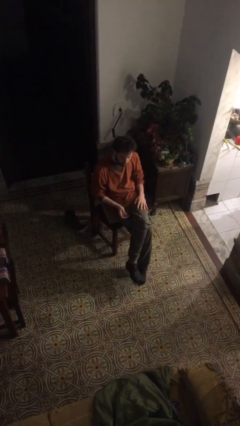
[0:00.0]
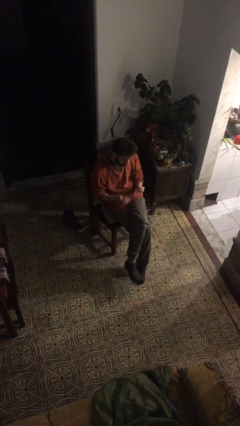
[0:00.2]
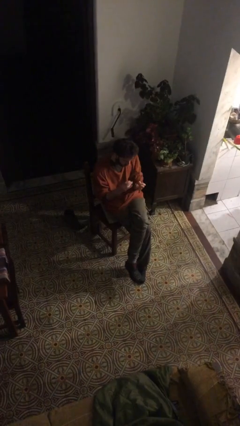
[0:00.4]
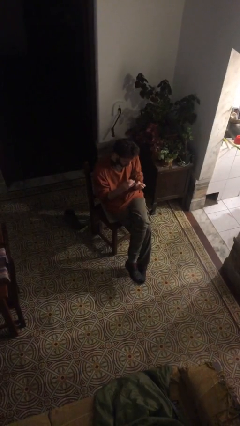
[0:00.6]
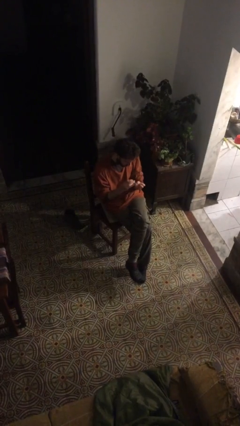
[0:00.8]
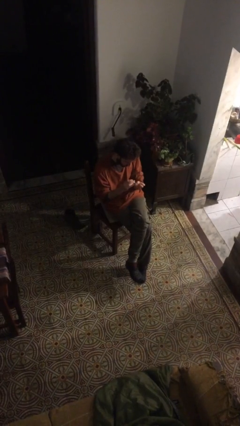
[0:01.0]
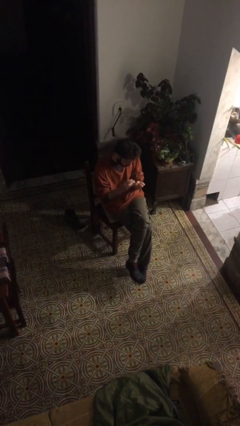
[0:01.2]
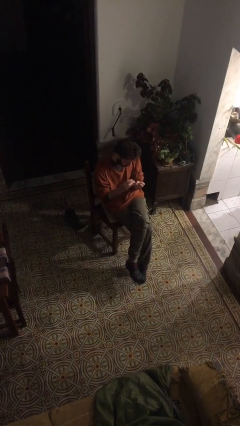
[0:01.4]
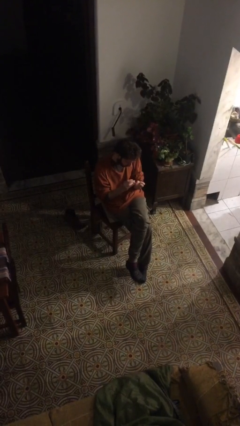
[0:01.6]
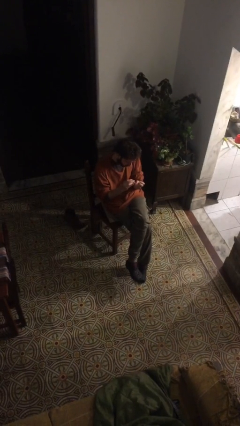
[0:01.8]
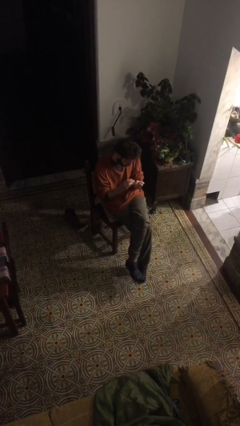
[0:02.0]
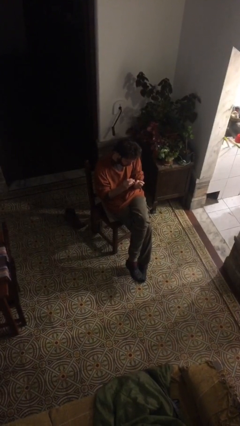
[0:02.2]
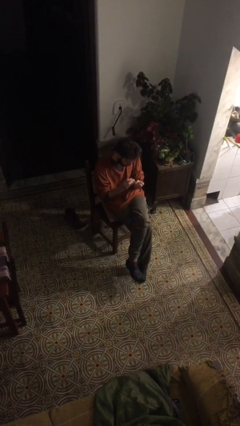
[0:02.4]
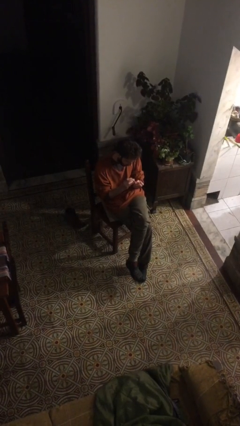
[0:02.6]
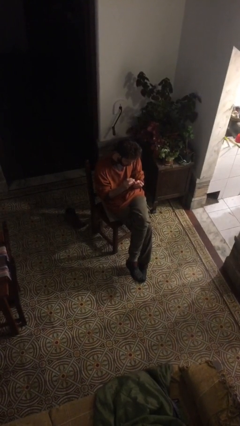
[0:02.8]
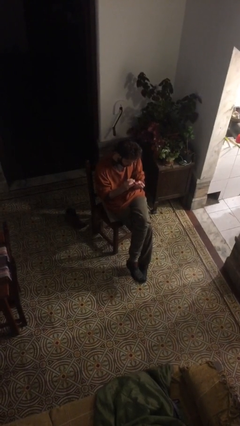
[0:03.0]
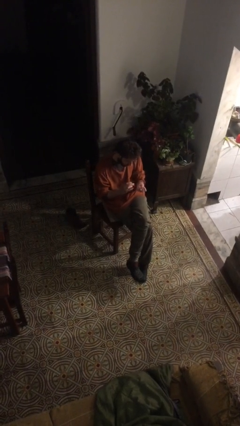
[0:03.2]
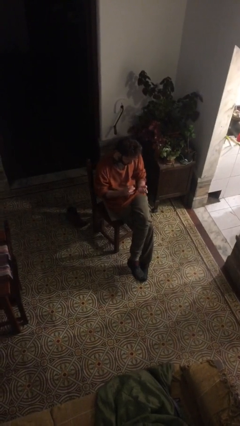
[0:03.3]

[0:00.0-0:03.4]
person clips fingernails

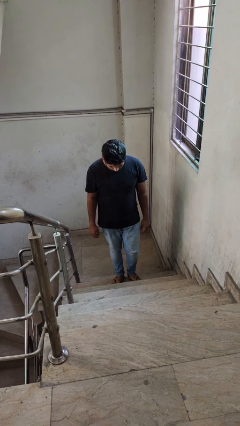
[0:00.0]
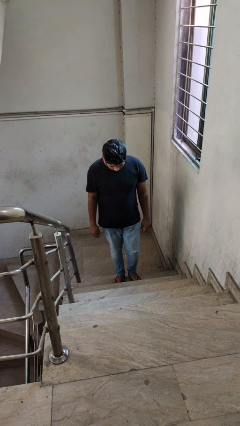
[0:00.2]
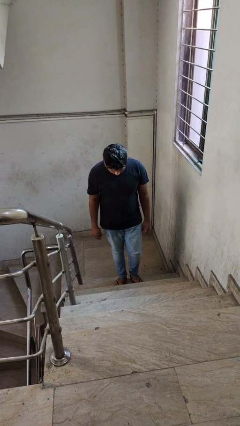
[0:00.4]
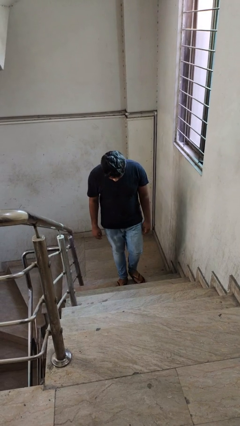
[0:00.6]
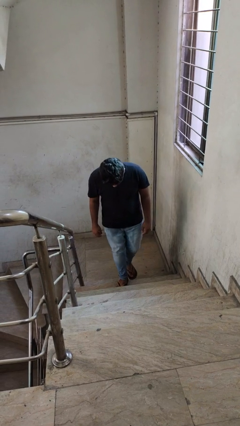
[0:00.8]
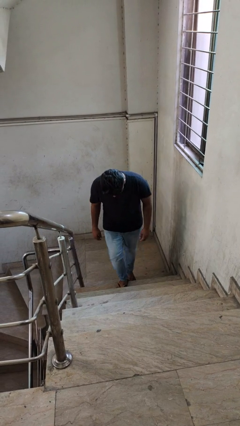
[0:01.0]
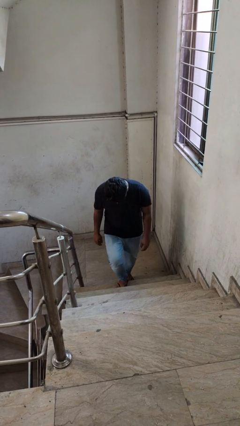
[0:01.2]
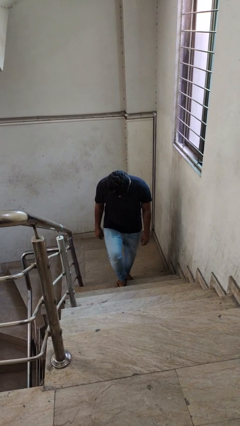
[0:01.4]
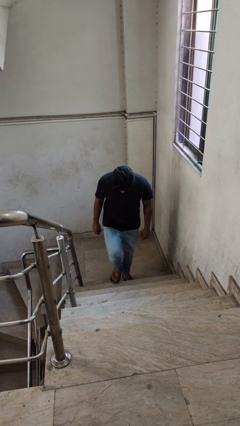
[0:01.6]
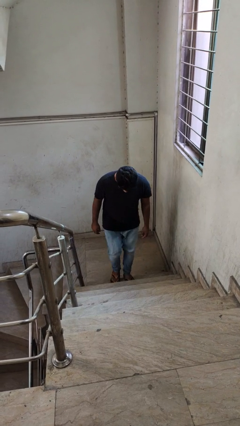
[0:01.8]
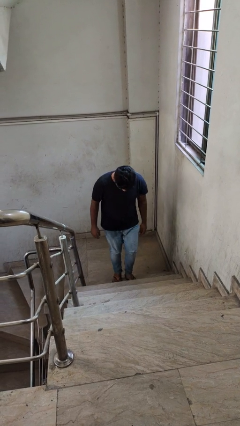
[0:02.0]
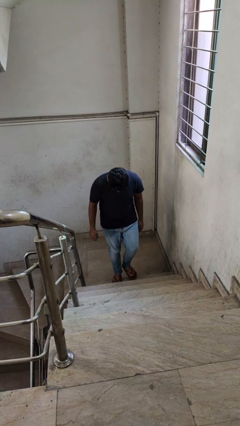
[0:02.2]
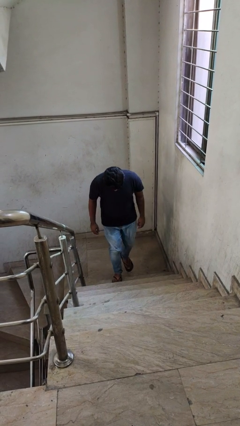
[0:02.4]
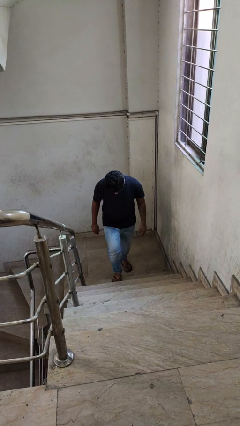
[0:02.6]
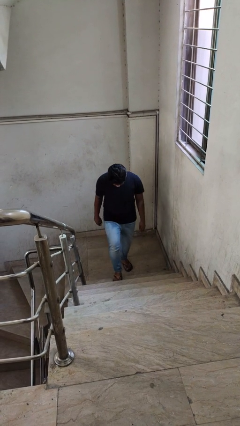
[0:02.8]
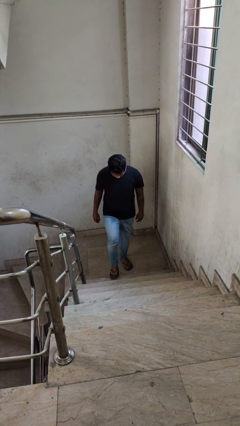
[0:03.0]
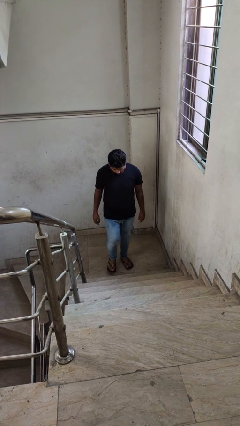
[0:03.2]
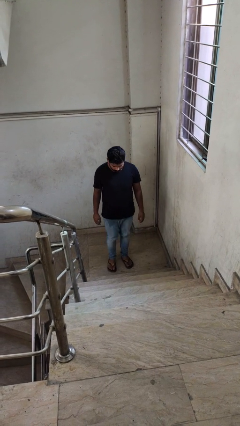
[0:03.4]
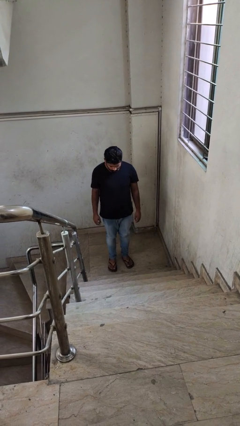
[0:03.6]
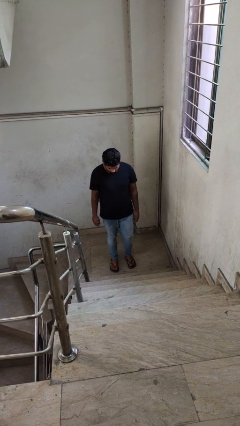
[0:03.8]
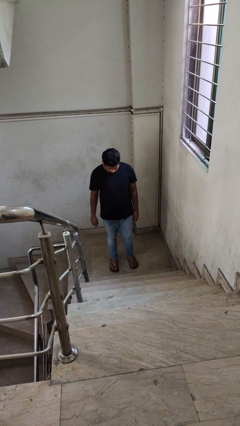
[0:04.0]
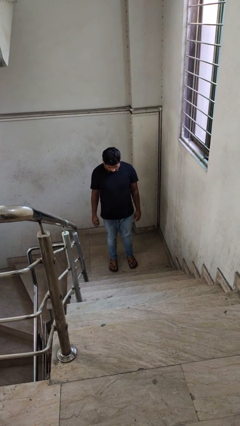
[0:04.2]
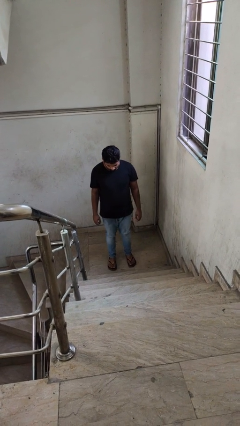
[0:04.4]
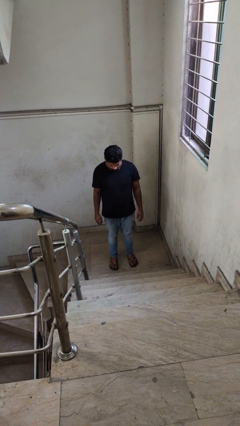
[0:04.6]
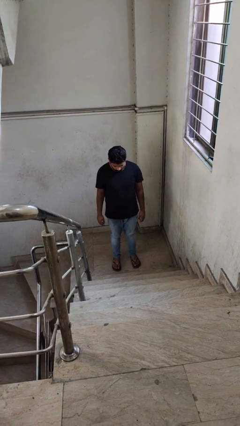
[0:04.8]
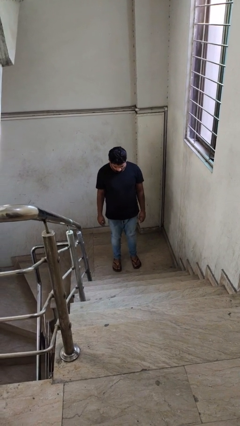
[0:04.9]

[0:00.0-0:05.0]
person climbs down stairs

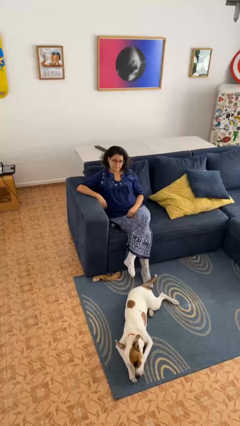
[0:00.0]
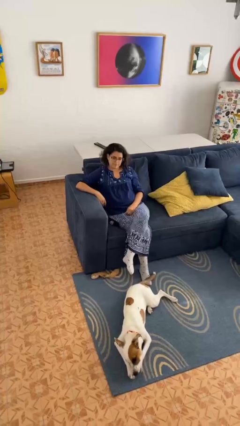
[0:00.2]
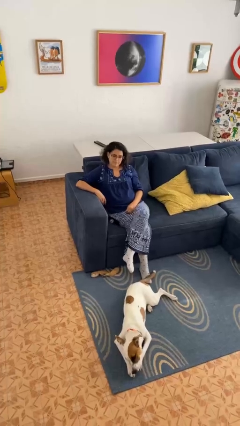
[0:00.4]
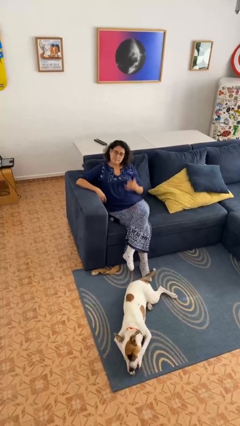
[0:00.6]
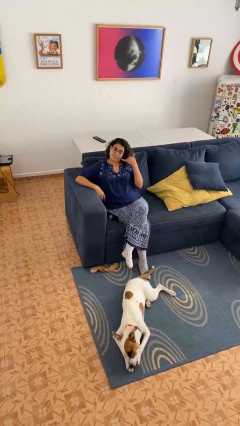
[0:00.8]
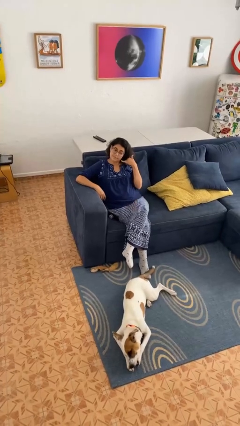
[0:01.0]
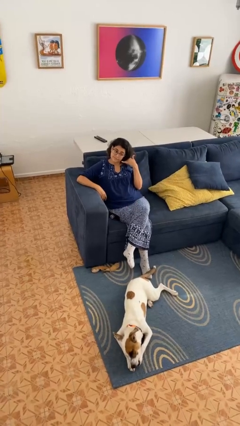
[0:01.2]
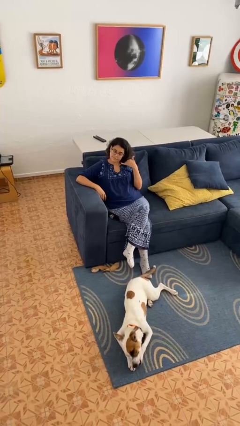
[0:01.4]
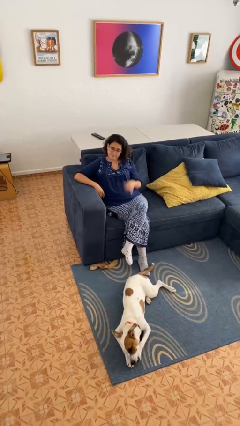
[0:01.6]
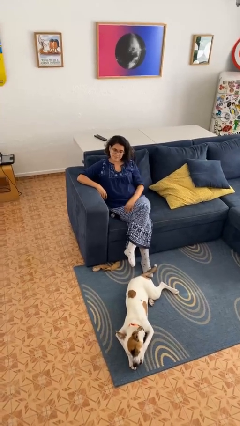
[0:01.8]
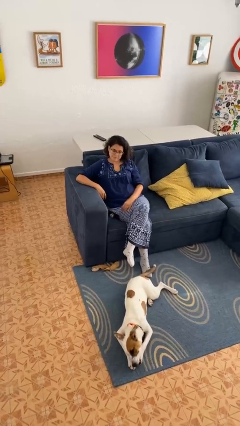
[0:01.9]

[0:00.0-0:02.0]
person gestures call me

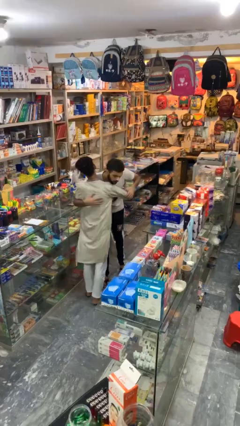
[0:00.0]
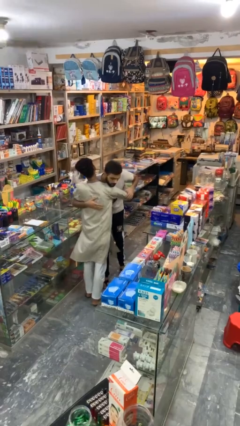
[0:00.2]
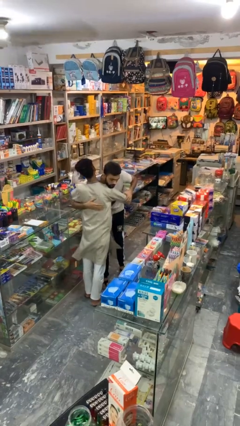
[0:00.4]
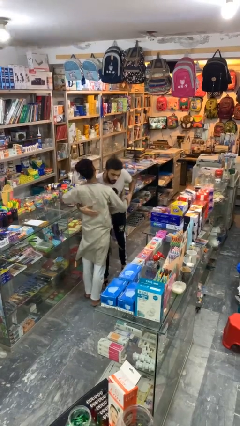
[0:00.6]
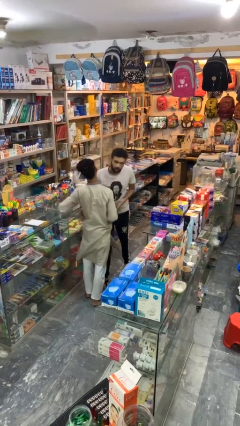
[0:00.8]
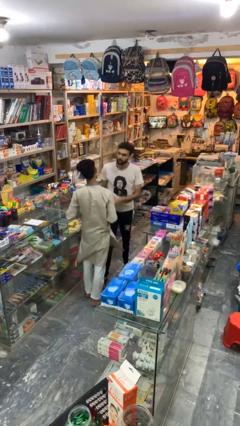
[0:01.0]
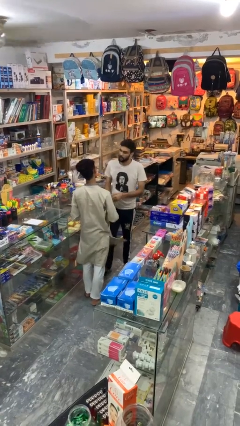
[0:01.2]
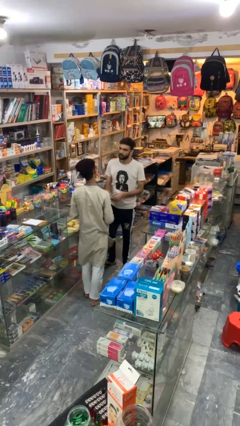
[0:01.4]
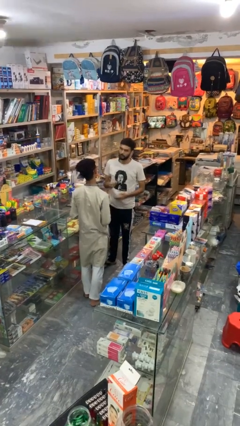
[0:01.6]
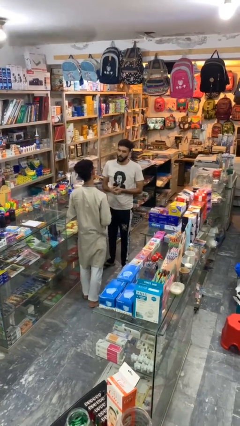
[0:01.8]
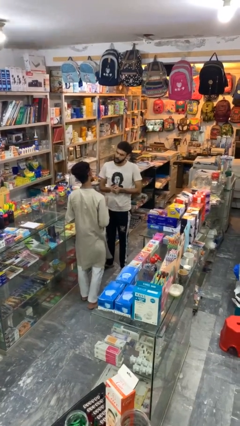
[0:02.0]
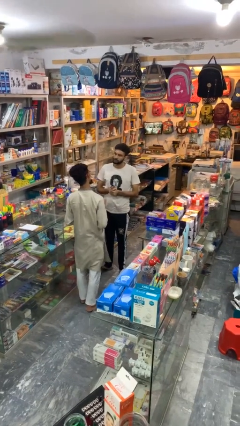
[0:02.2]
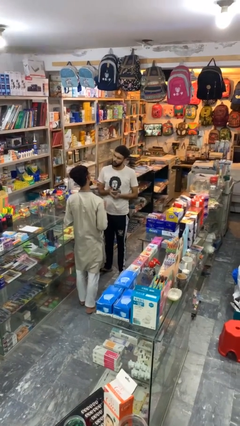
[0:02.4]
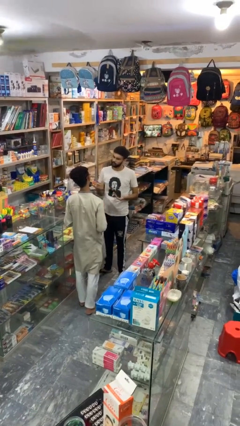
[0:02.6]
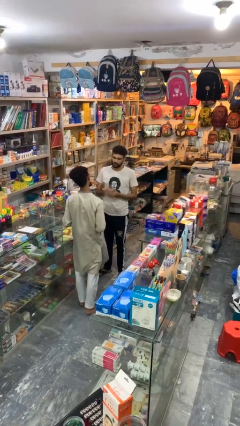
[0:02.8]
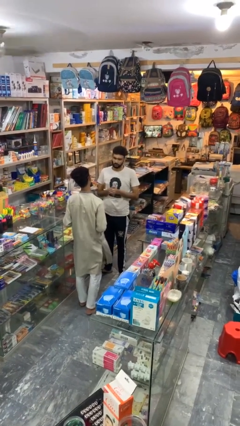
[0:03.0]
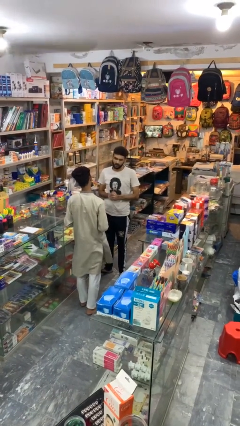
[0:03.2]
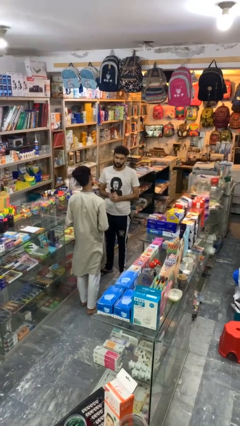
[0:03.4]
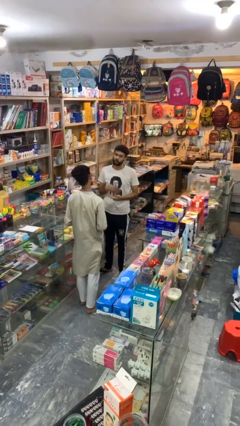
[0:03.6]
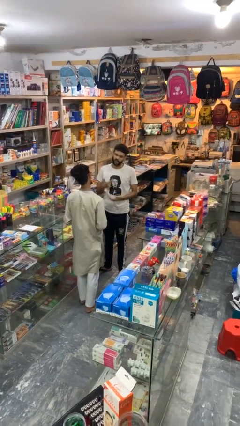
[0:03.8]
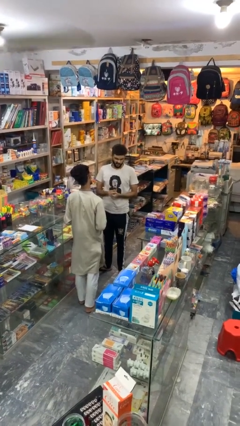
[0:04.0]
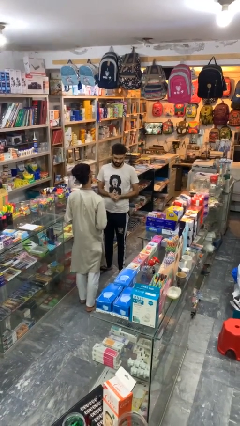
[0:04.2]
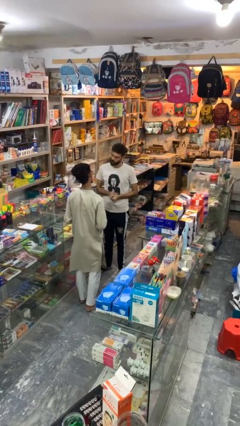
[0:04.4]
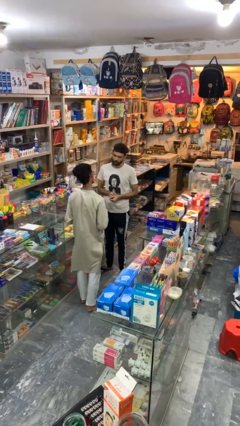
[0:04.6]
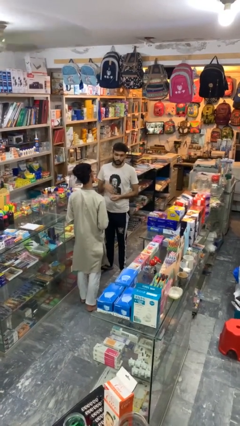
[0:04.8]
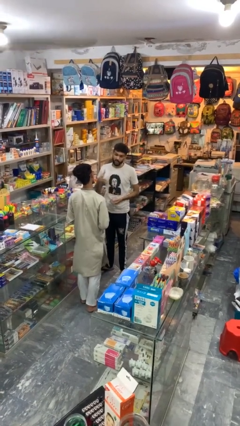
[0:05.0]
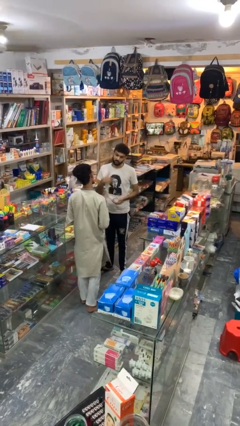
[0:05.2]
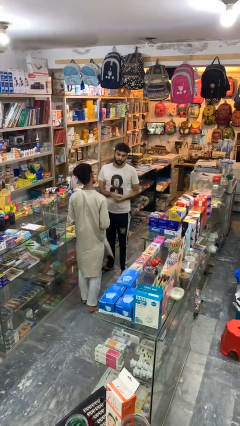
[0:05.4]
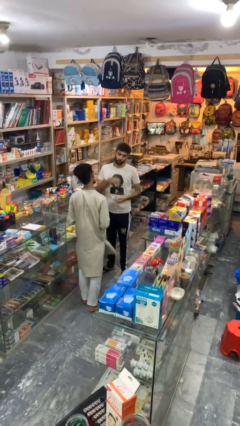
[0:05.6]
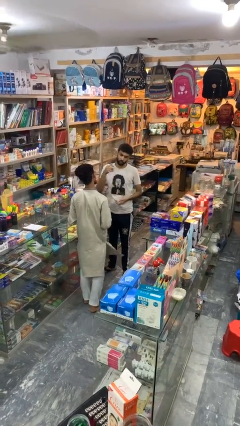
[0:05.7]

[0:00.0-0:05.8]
person talks to person

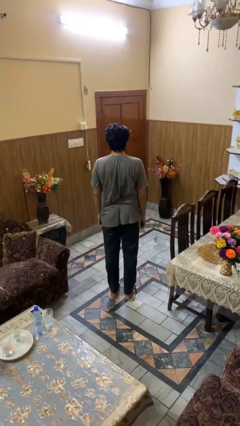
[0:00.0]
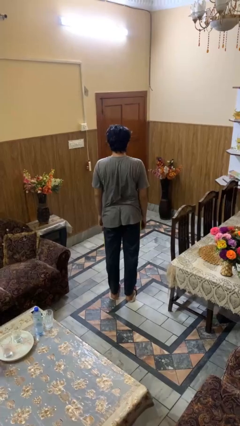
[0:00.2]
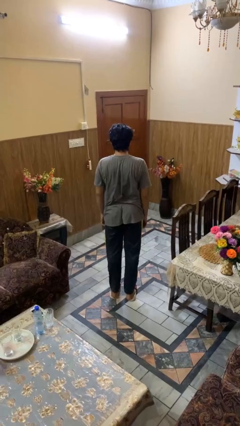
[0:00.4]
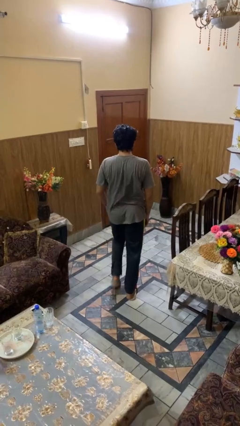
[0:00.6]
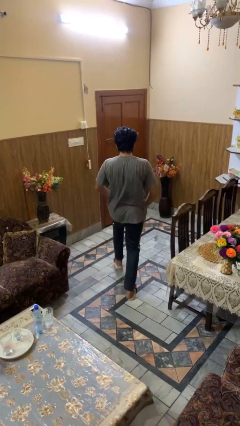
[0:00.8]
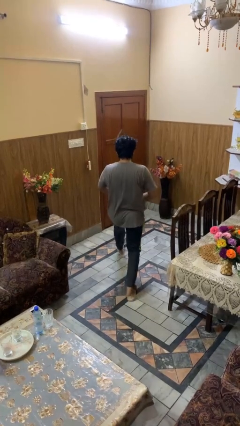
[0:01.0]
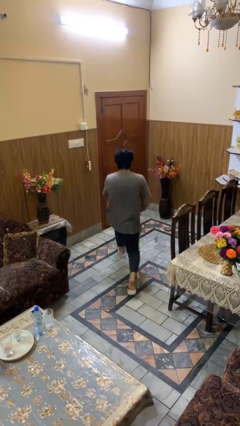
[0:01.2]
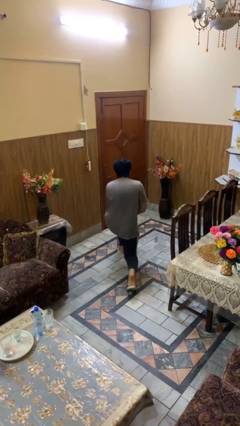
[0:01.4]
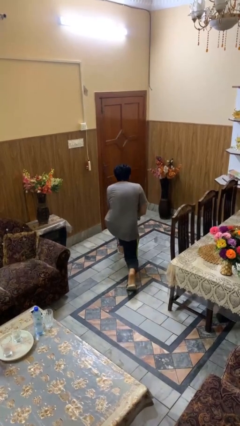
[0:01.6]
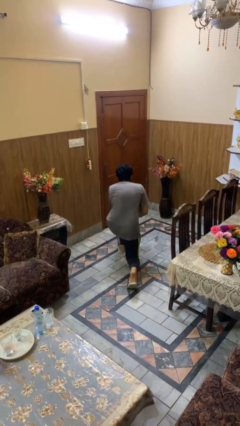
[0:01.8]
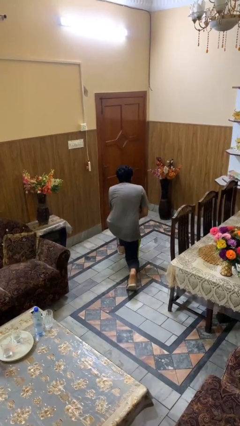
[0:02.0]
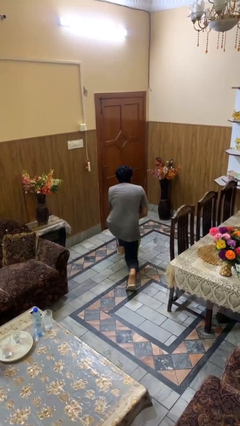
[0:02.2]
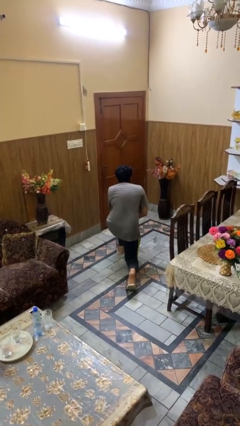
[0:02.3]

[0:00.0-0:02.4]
person kneels
